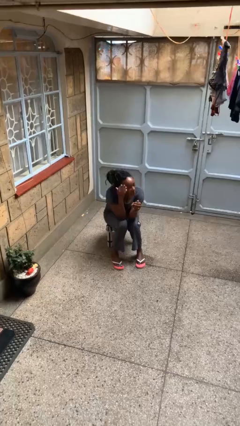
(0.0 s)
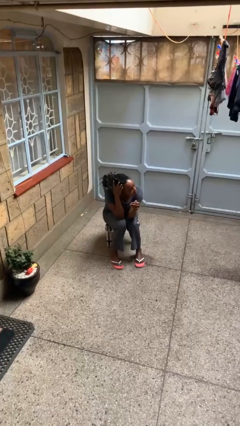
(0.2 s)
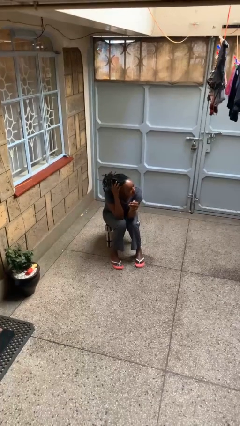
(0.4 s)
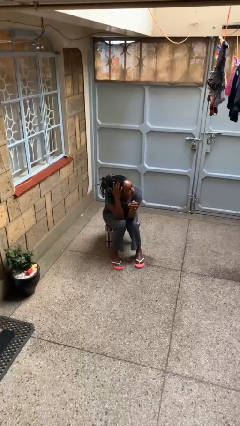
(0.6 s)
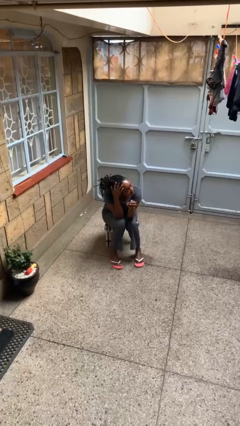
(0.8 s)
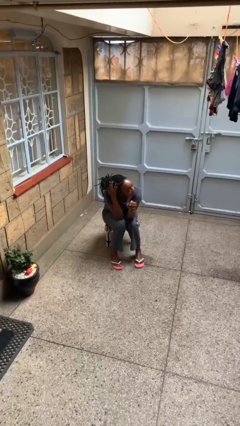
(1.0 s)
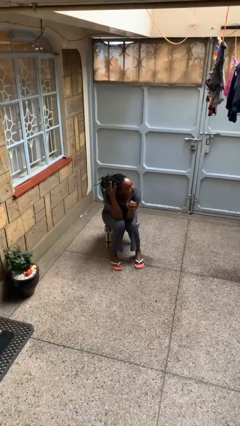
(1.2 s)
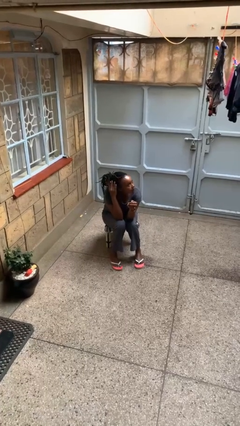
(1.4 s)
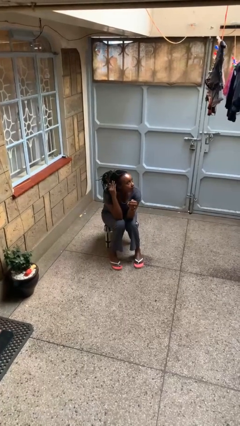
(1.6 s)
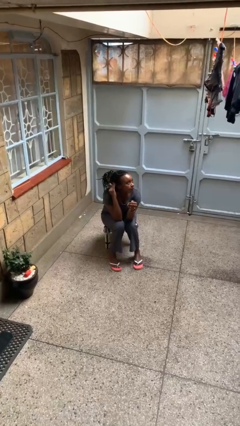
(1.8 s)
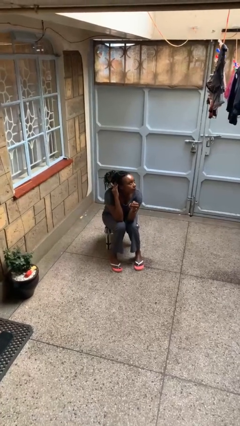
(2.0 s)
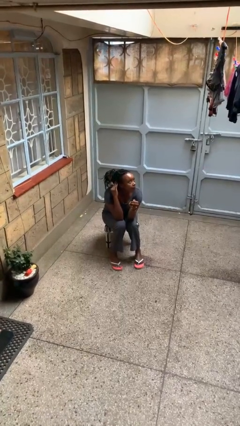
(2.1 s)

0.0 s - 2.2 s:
person strokes hair

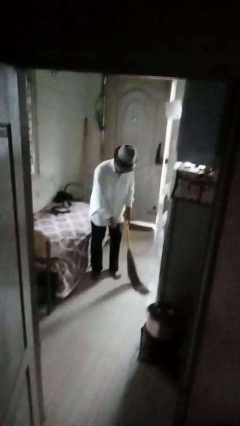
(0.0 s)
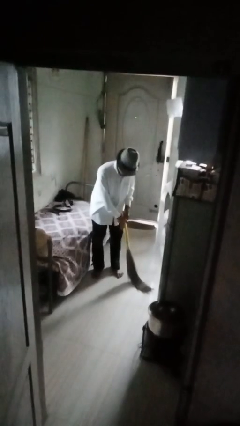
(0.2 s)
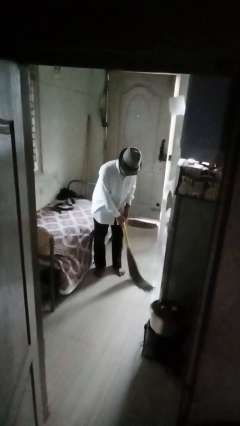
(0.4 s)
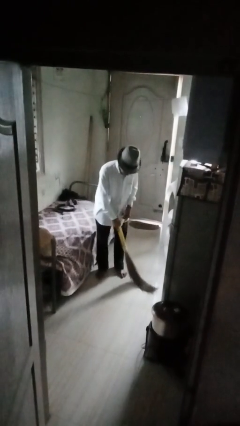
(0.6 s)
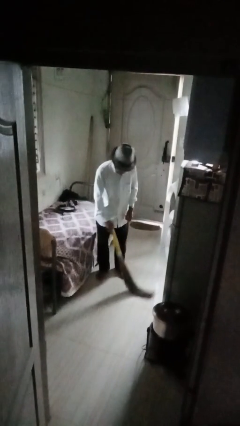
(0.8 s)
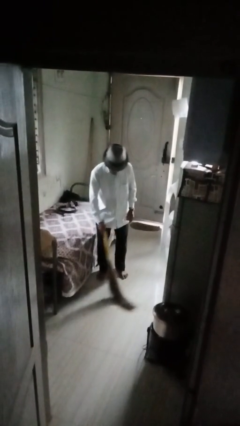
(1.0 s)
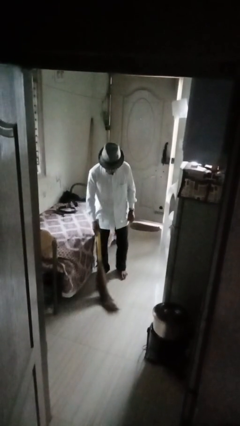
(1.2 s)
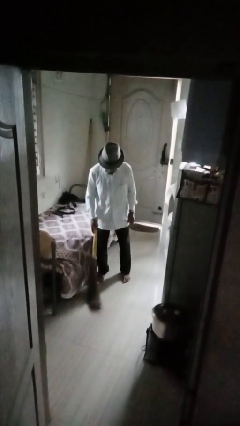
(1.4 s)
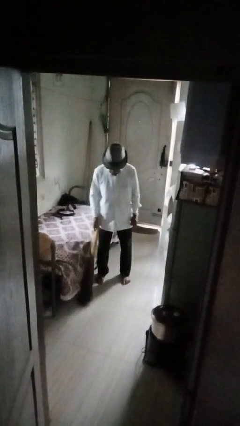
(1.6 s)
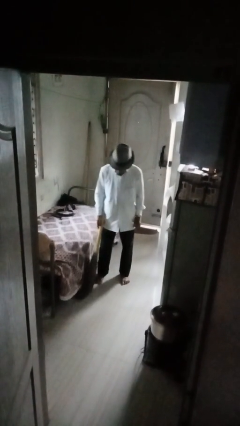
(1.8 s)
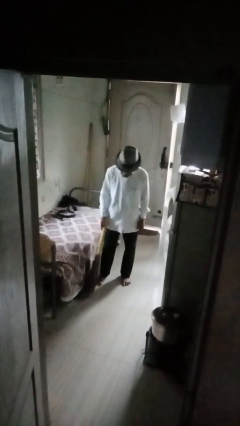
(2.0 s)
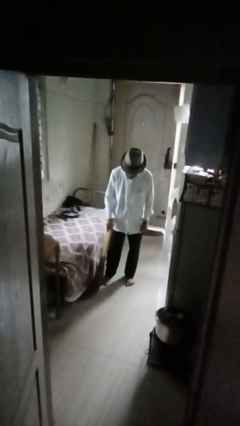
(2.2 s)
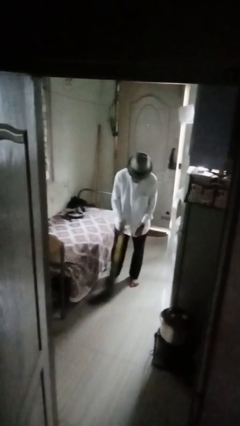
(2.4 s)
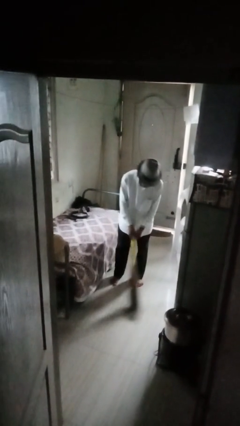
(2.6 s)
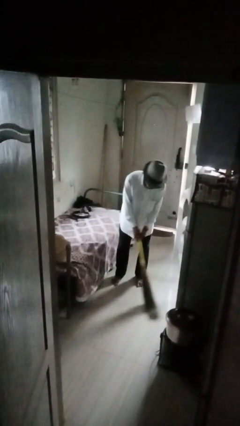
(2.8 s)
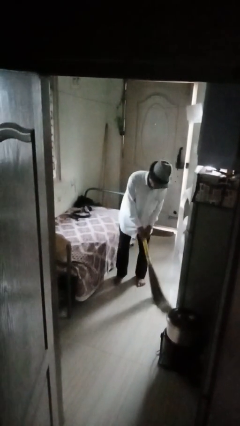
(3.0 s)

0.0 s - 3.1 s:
person sweeps floor

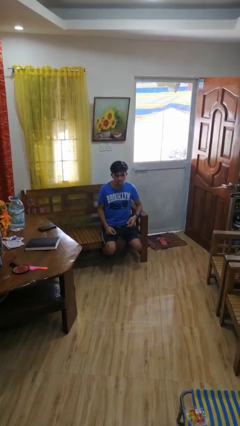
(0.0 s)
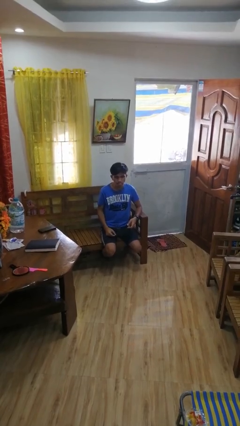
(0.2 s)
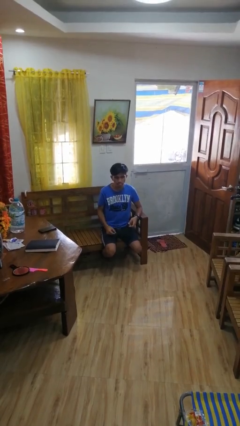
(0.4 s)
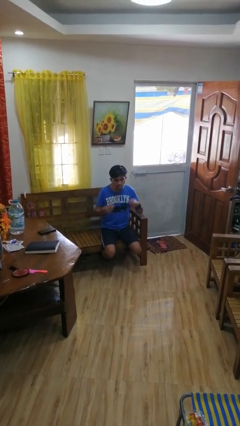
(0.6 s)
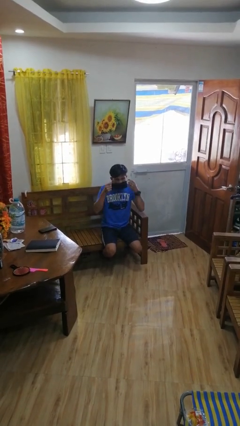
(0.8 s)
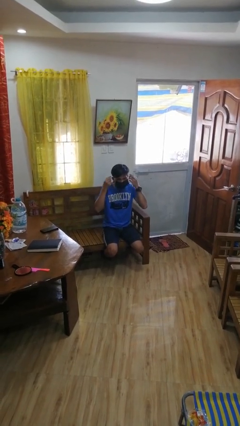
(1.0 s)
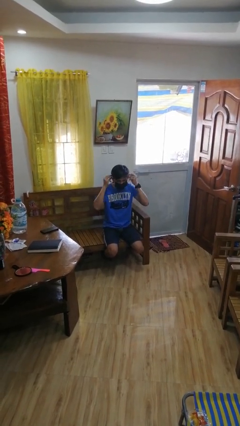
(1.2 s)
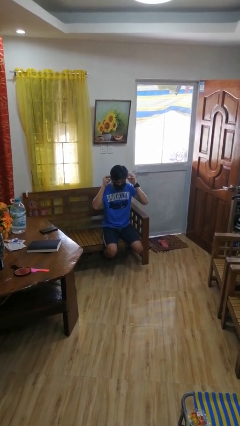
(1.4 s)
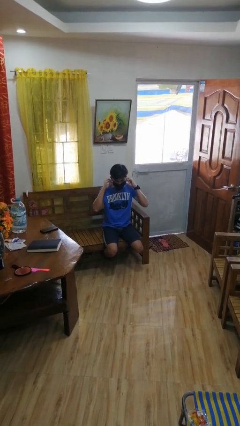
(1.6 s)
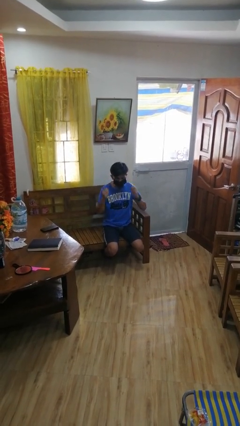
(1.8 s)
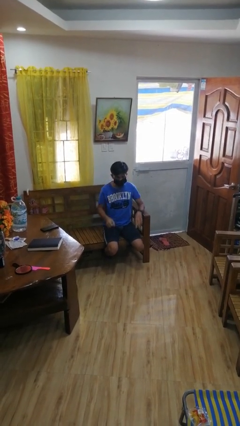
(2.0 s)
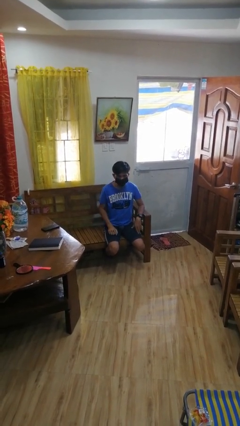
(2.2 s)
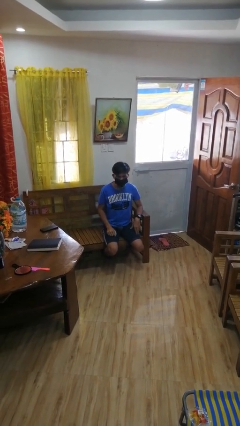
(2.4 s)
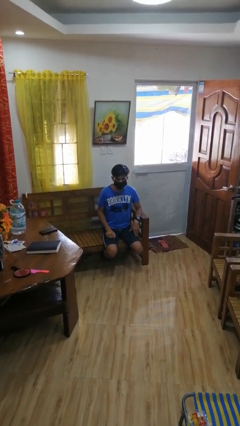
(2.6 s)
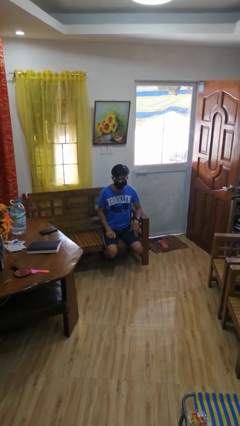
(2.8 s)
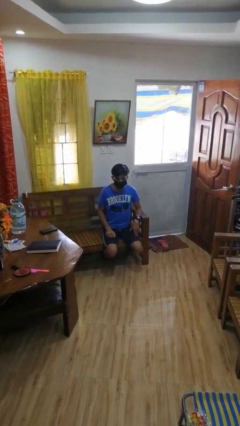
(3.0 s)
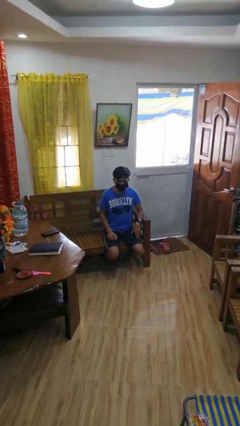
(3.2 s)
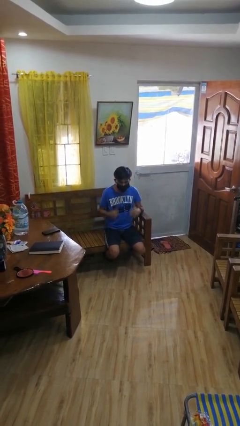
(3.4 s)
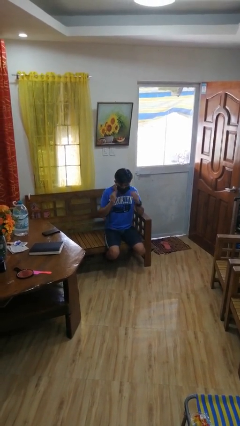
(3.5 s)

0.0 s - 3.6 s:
person puts on facemask

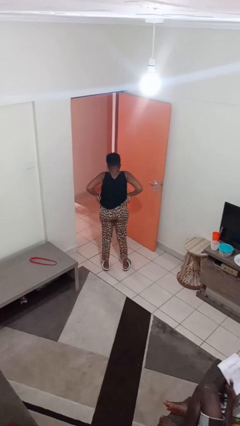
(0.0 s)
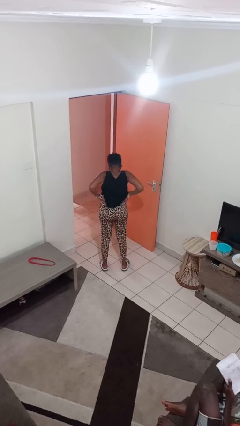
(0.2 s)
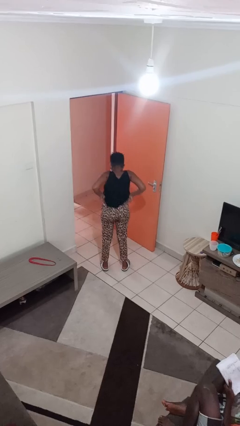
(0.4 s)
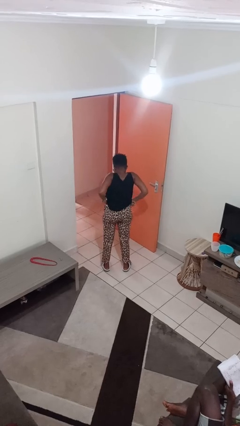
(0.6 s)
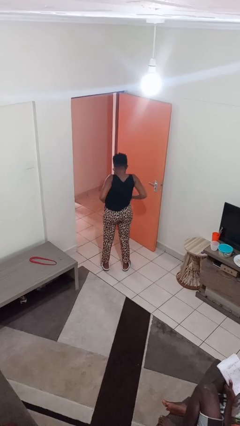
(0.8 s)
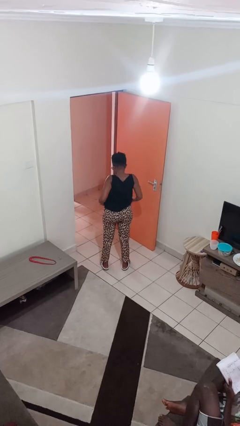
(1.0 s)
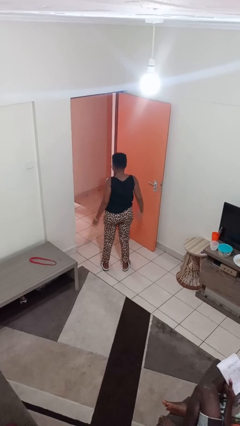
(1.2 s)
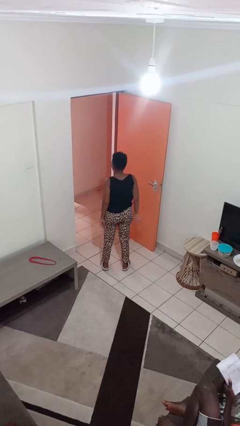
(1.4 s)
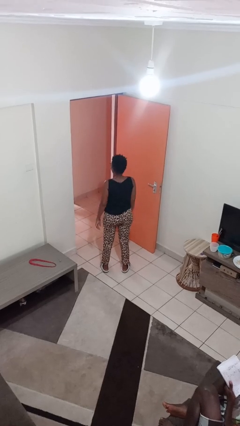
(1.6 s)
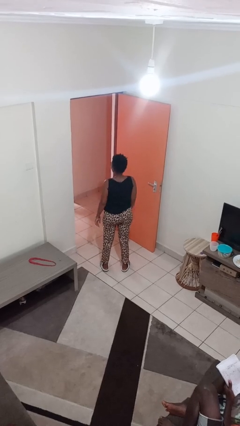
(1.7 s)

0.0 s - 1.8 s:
person hikes up pants

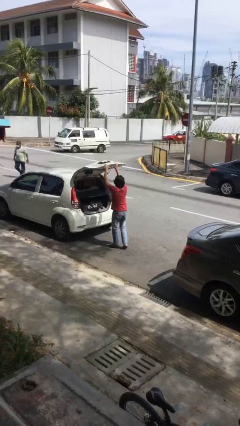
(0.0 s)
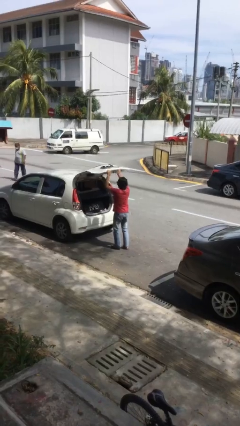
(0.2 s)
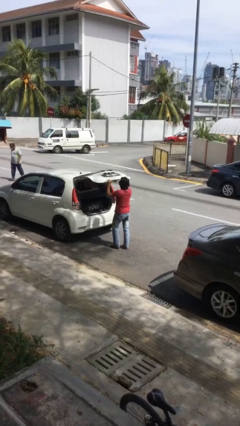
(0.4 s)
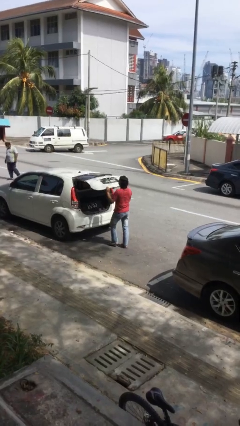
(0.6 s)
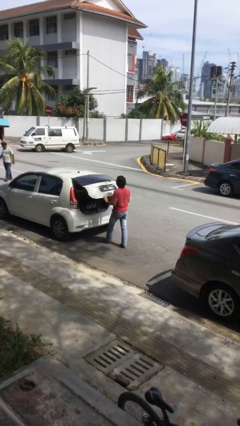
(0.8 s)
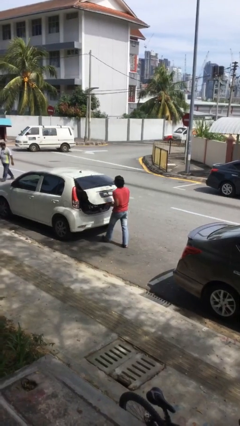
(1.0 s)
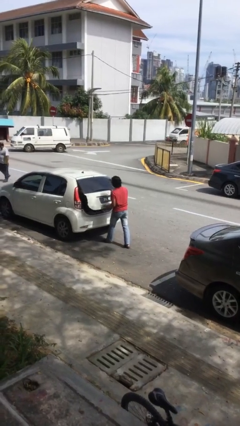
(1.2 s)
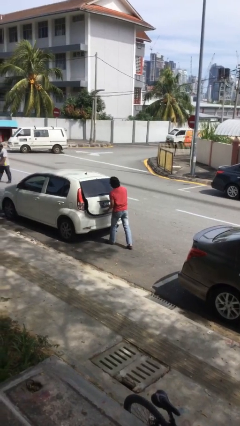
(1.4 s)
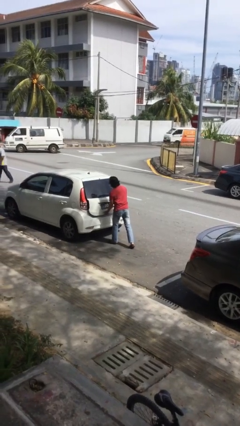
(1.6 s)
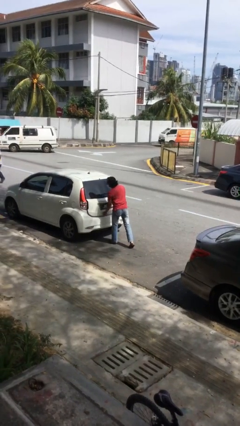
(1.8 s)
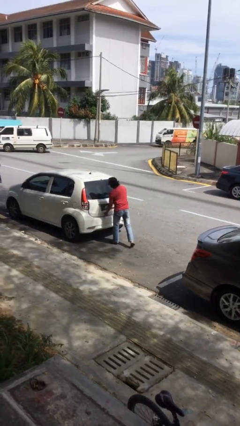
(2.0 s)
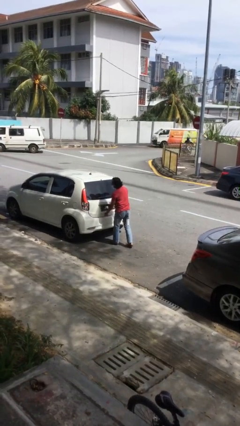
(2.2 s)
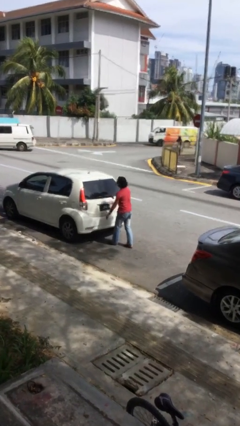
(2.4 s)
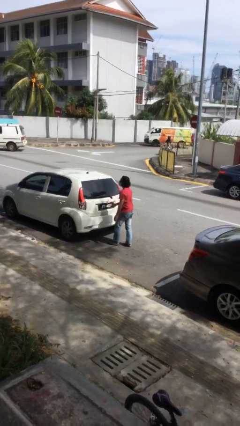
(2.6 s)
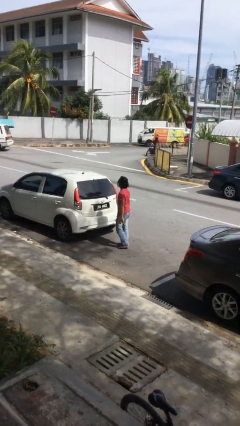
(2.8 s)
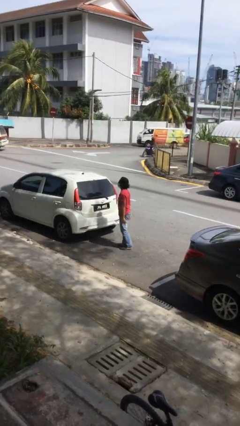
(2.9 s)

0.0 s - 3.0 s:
person closes car trunk

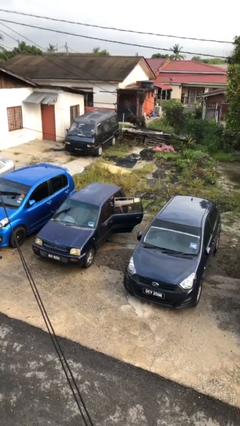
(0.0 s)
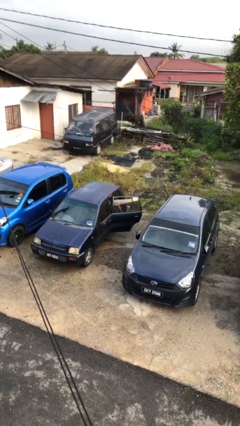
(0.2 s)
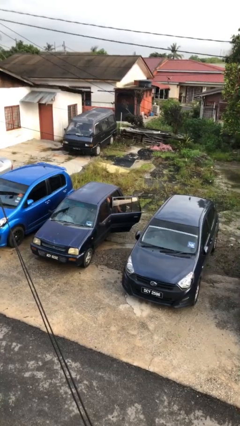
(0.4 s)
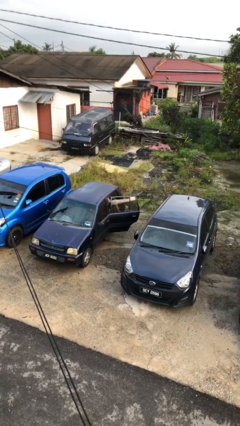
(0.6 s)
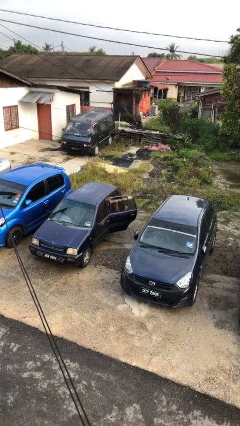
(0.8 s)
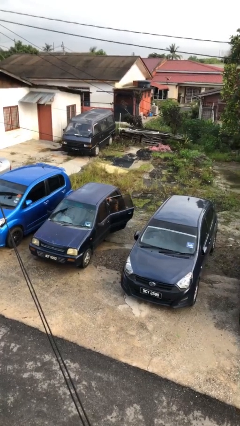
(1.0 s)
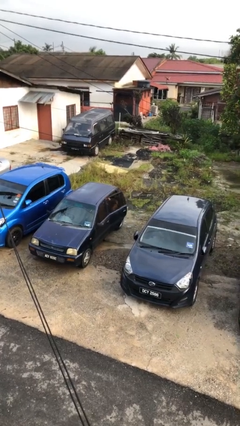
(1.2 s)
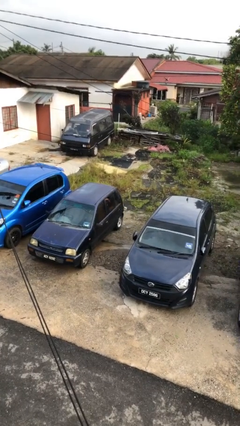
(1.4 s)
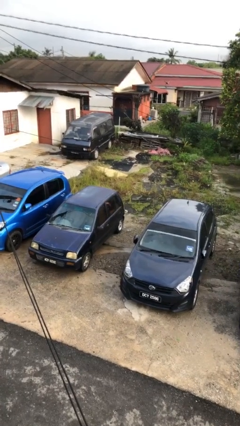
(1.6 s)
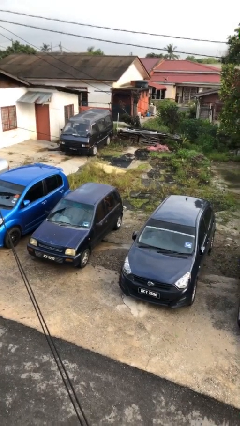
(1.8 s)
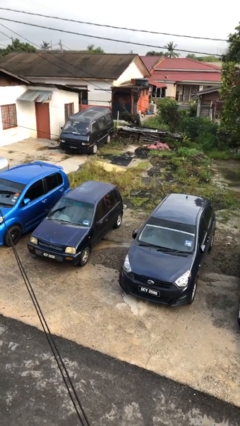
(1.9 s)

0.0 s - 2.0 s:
person closes car door

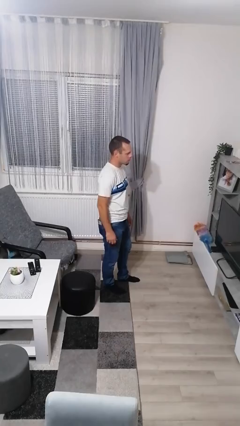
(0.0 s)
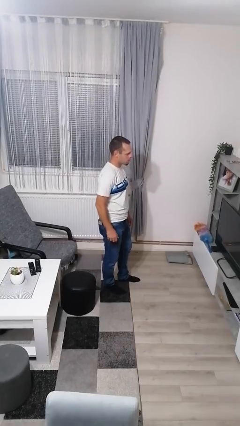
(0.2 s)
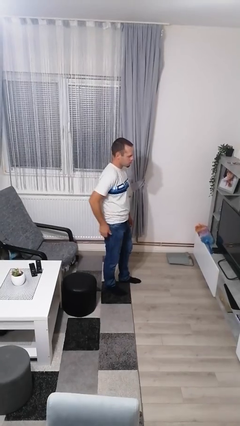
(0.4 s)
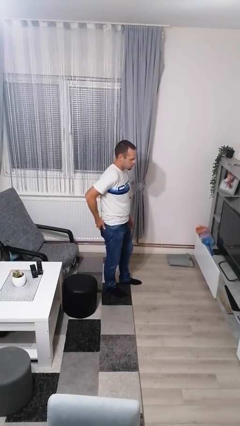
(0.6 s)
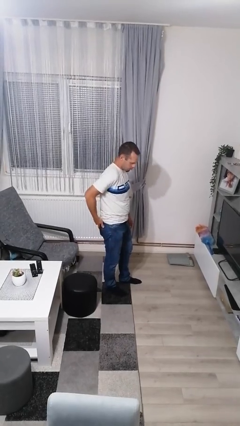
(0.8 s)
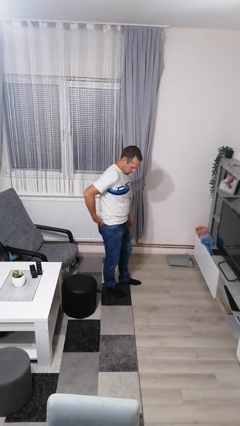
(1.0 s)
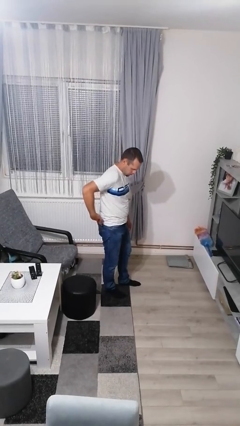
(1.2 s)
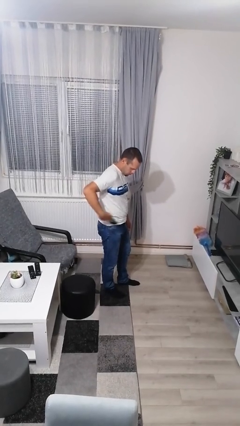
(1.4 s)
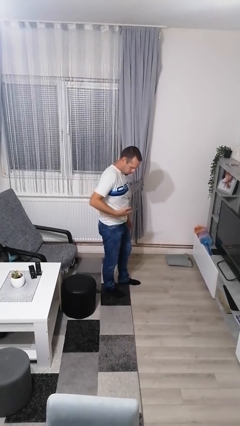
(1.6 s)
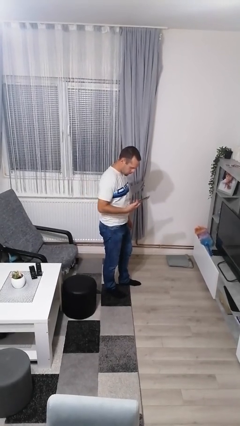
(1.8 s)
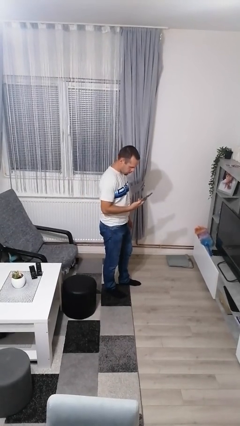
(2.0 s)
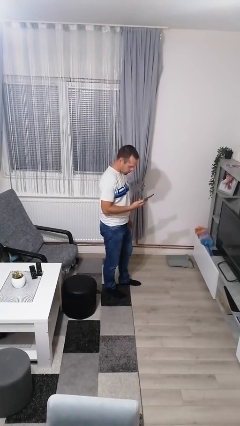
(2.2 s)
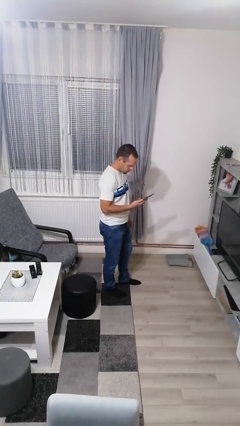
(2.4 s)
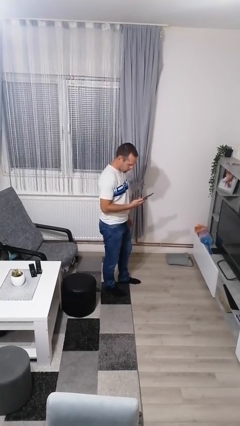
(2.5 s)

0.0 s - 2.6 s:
person takes phone from pocket
